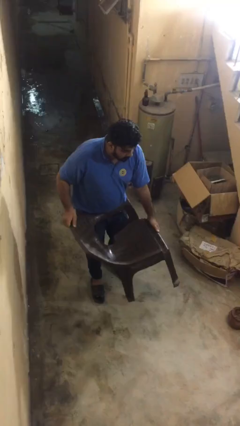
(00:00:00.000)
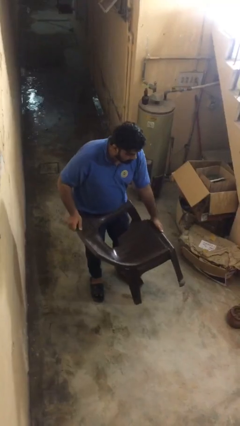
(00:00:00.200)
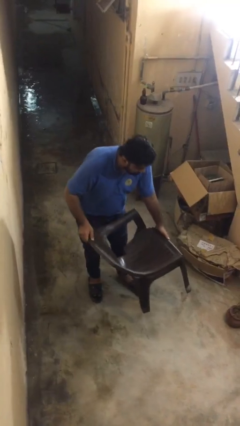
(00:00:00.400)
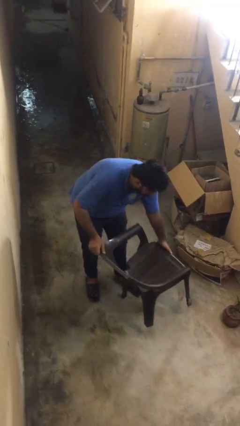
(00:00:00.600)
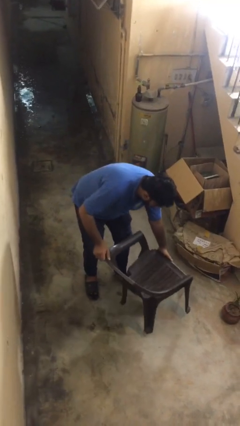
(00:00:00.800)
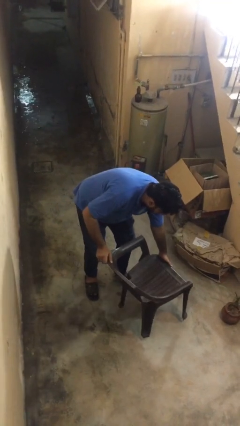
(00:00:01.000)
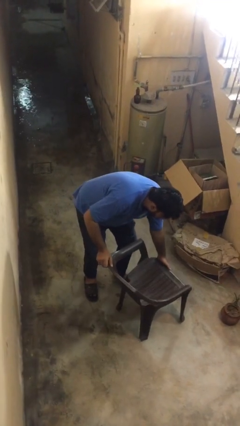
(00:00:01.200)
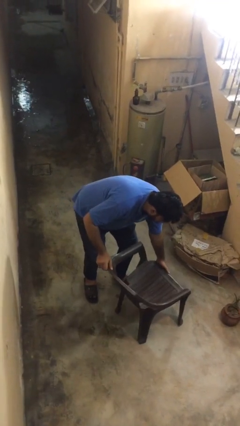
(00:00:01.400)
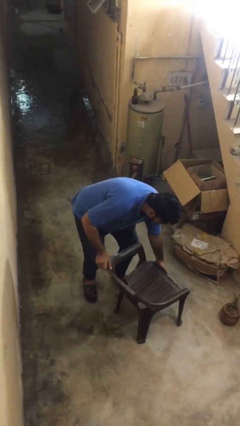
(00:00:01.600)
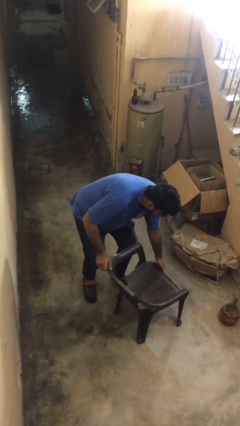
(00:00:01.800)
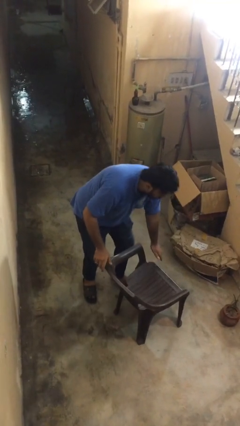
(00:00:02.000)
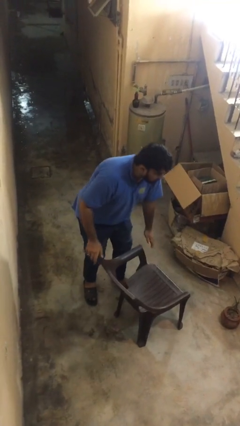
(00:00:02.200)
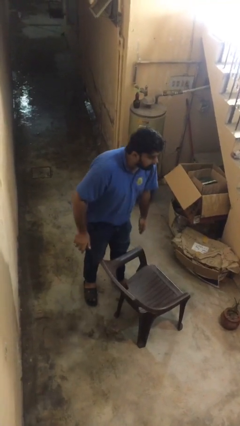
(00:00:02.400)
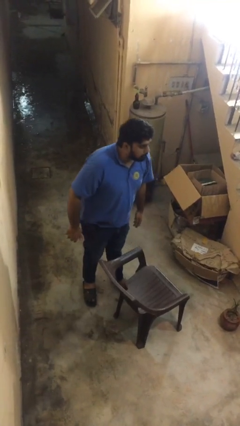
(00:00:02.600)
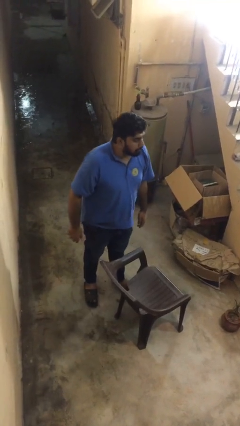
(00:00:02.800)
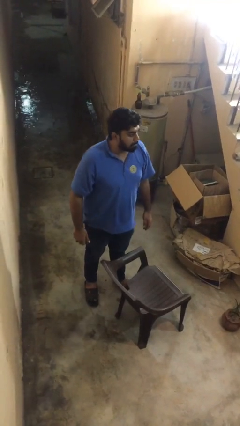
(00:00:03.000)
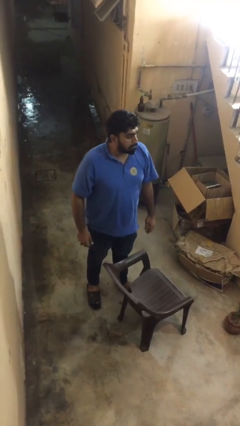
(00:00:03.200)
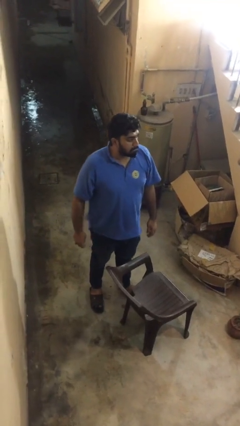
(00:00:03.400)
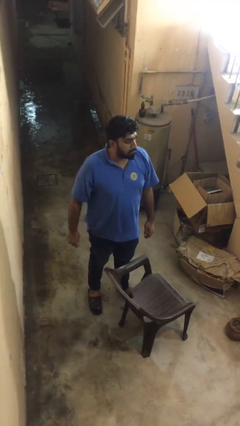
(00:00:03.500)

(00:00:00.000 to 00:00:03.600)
person puts down object on floor

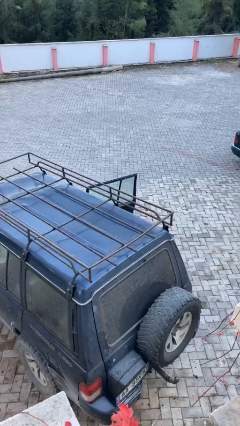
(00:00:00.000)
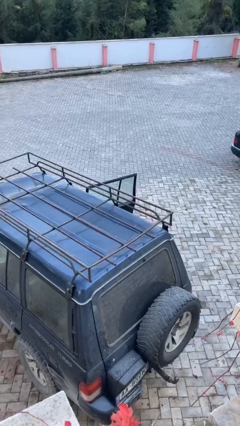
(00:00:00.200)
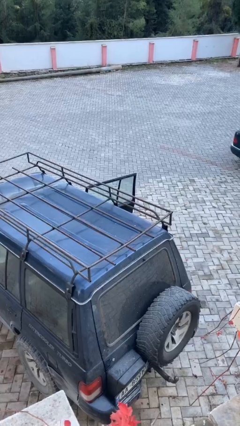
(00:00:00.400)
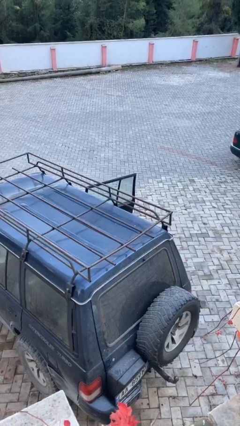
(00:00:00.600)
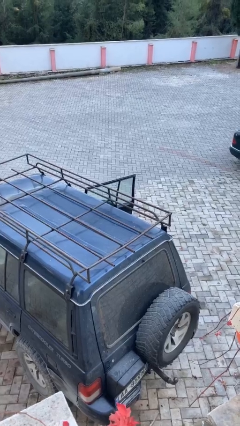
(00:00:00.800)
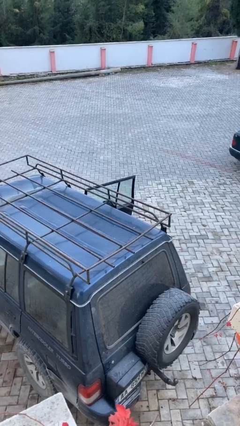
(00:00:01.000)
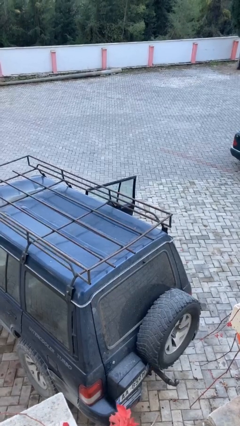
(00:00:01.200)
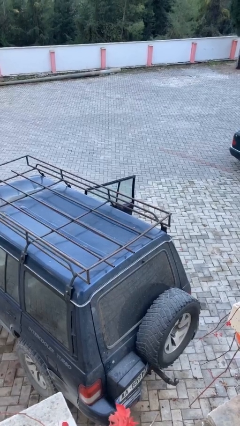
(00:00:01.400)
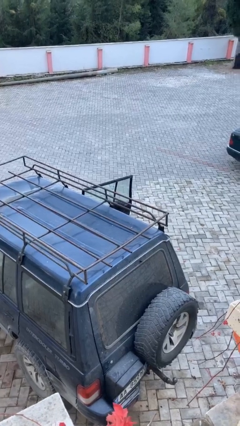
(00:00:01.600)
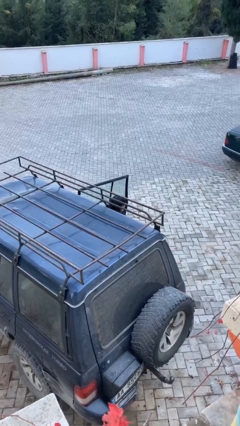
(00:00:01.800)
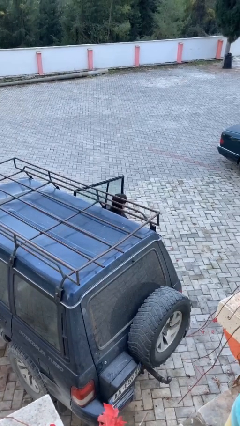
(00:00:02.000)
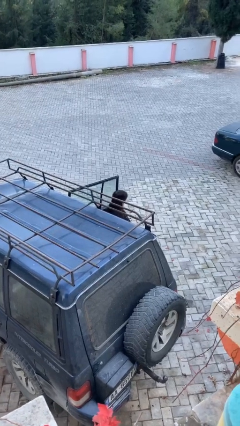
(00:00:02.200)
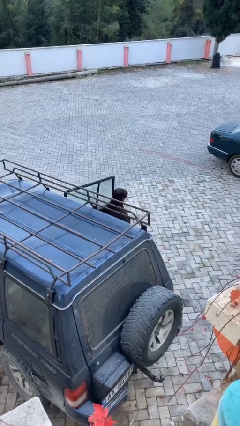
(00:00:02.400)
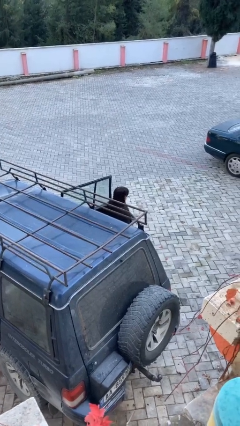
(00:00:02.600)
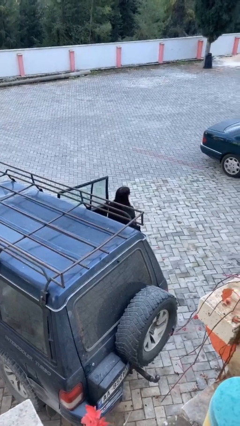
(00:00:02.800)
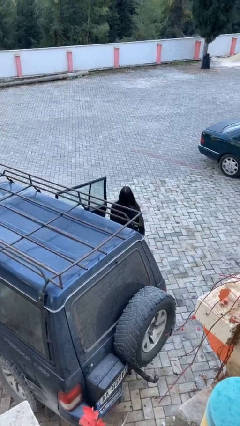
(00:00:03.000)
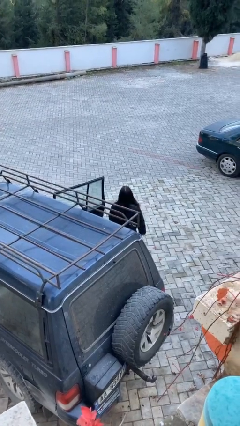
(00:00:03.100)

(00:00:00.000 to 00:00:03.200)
person exits car

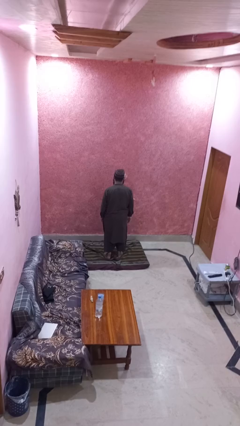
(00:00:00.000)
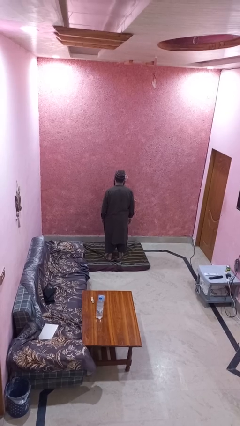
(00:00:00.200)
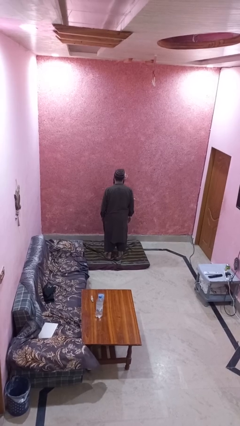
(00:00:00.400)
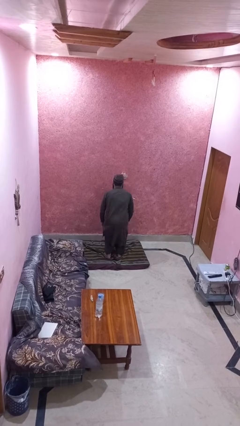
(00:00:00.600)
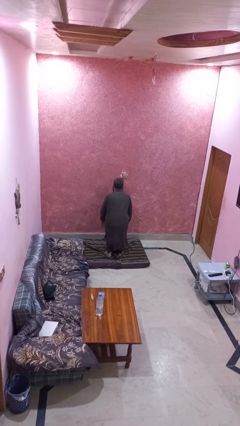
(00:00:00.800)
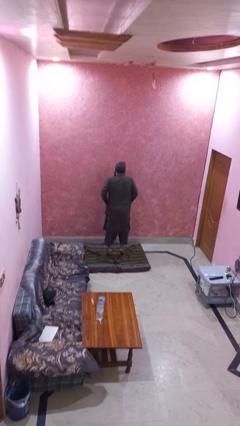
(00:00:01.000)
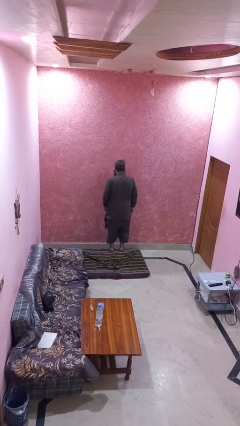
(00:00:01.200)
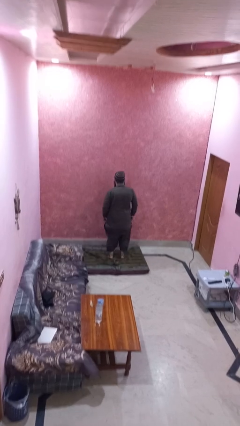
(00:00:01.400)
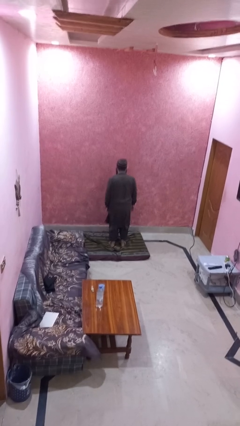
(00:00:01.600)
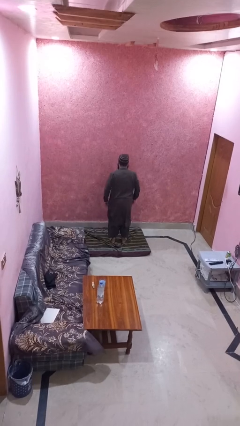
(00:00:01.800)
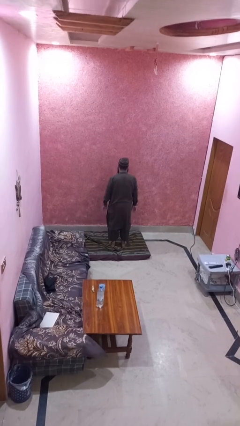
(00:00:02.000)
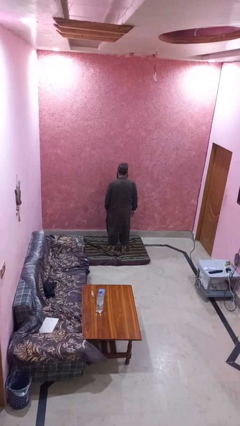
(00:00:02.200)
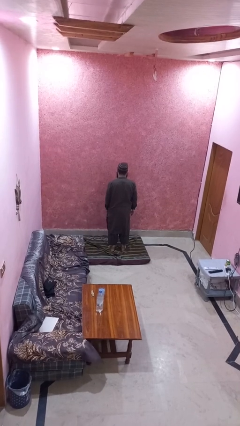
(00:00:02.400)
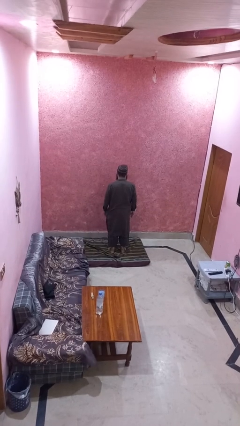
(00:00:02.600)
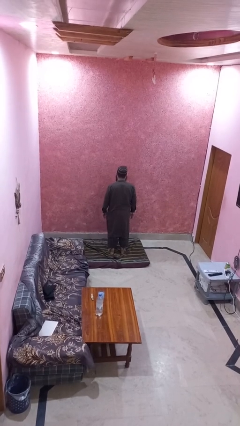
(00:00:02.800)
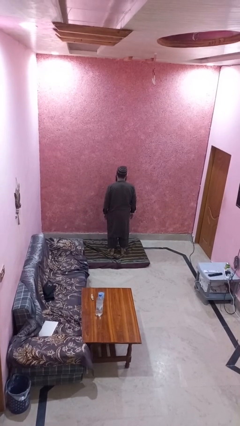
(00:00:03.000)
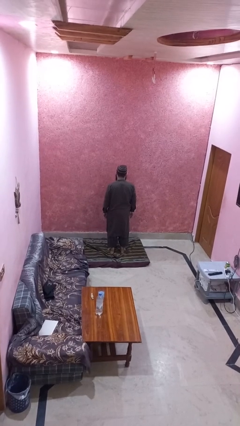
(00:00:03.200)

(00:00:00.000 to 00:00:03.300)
person jumps

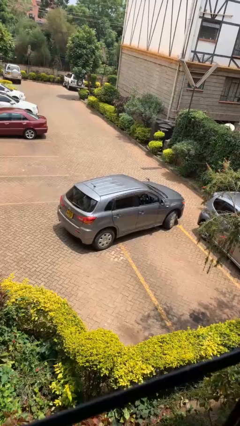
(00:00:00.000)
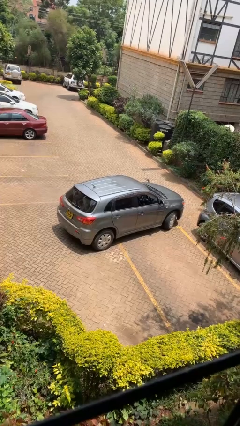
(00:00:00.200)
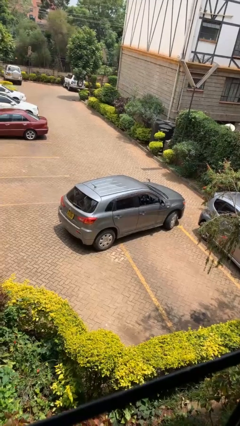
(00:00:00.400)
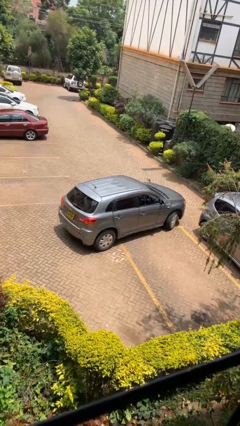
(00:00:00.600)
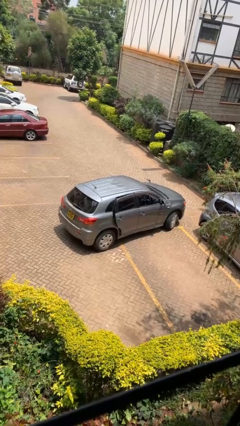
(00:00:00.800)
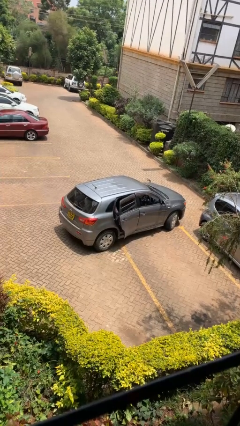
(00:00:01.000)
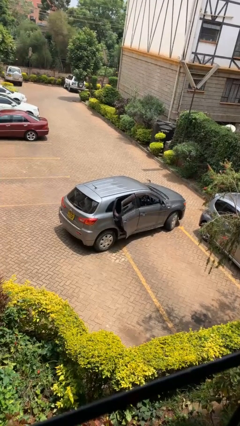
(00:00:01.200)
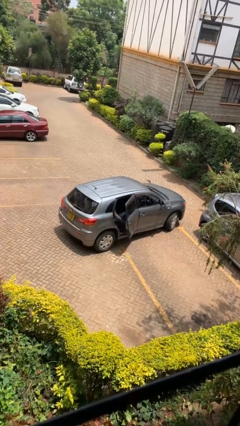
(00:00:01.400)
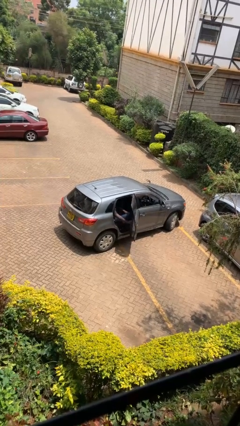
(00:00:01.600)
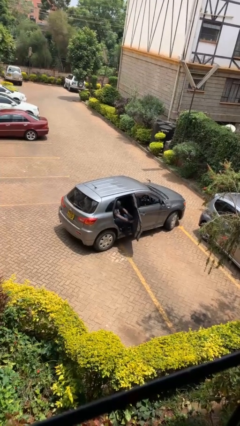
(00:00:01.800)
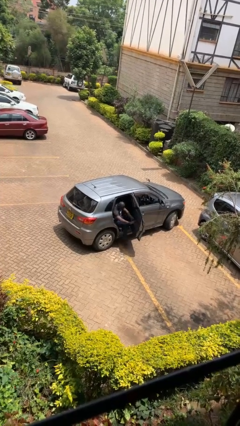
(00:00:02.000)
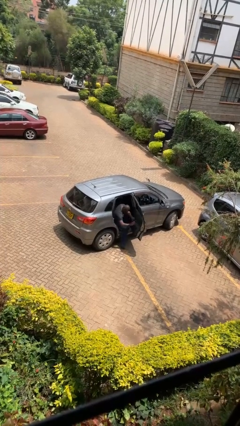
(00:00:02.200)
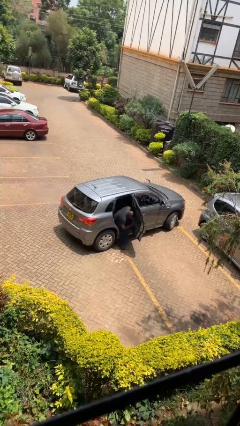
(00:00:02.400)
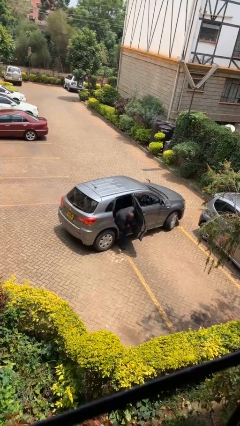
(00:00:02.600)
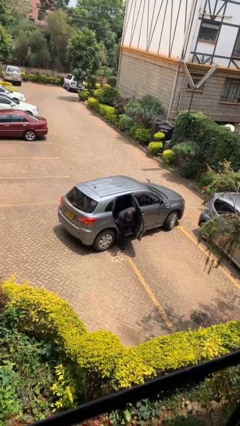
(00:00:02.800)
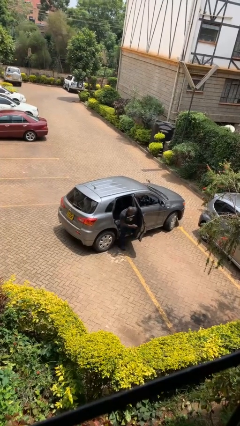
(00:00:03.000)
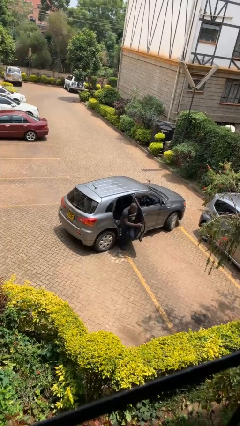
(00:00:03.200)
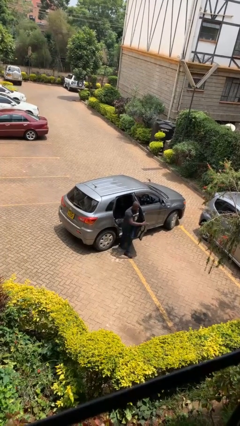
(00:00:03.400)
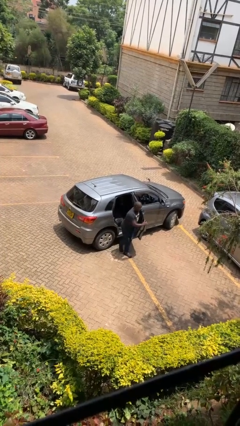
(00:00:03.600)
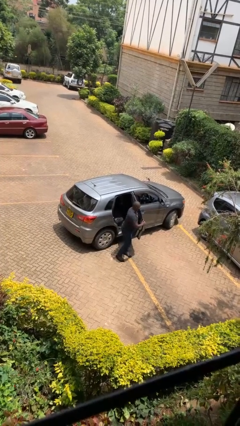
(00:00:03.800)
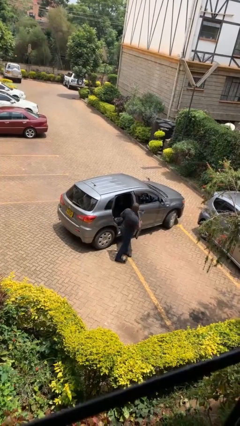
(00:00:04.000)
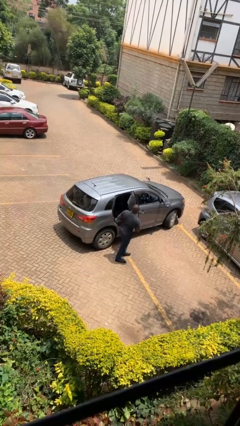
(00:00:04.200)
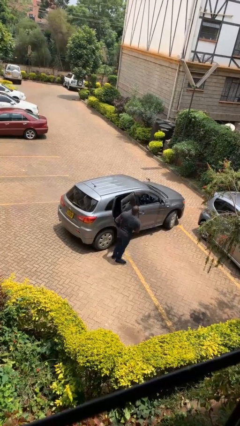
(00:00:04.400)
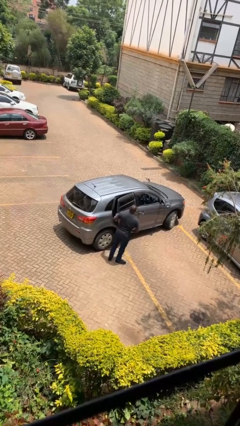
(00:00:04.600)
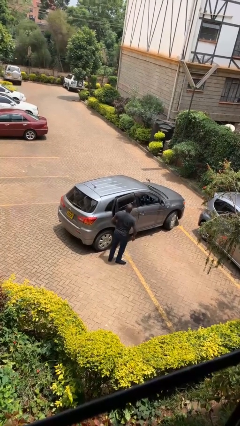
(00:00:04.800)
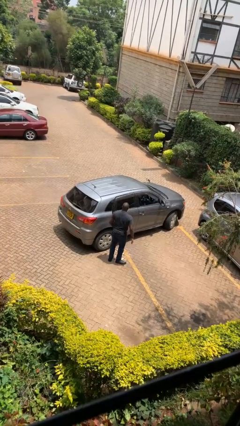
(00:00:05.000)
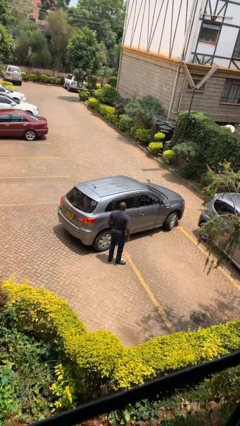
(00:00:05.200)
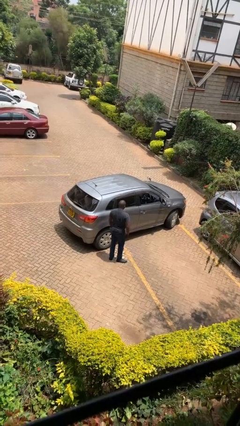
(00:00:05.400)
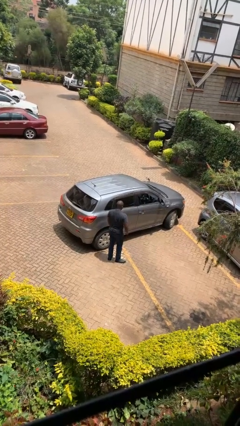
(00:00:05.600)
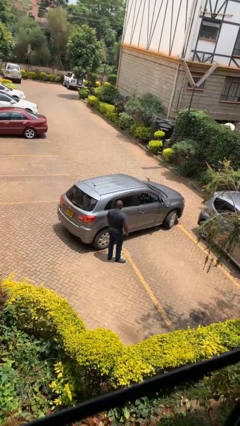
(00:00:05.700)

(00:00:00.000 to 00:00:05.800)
car drops off person

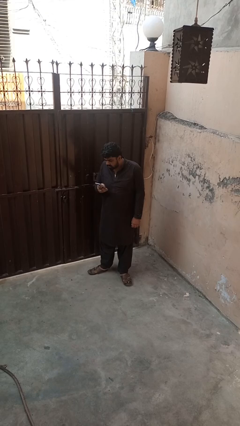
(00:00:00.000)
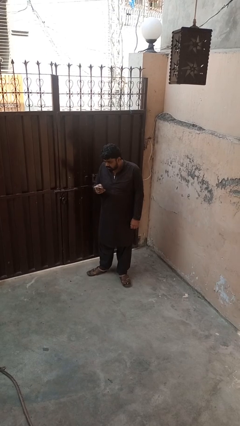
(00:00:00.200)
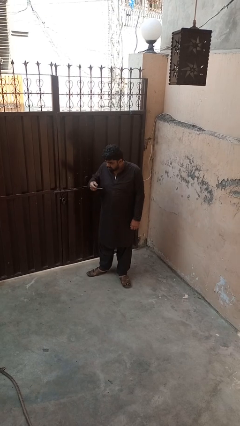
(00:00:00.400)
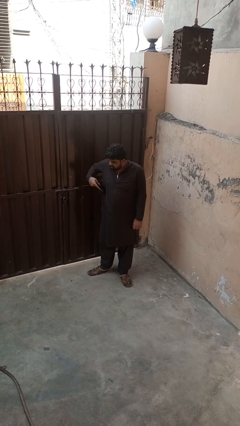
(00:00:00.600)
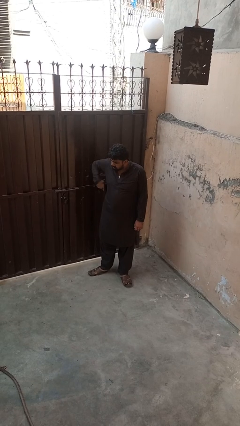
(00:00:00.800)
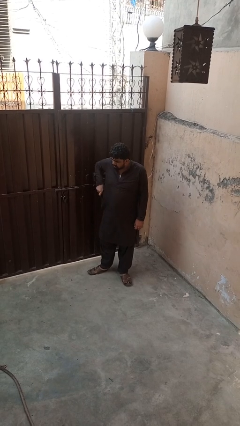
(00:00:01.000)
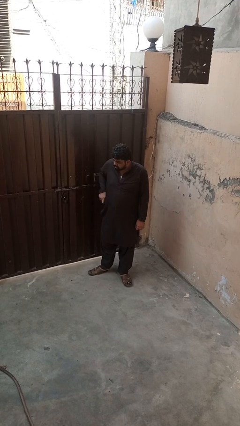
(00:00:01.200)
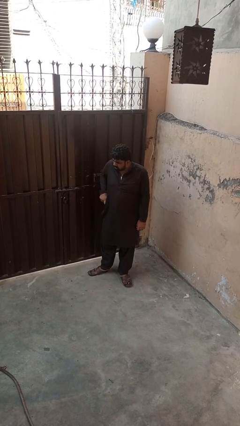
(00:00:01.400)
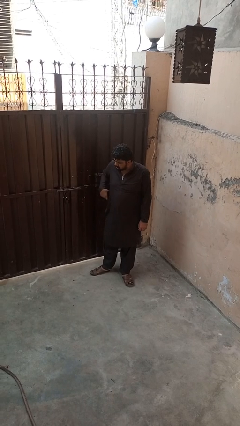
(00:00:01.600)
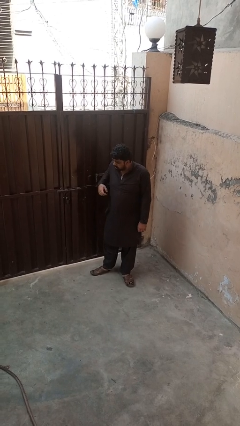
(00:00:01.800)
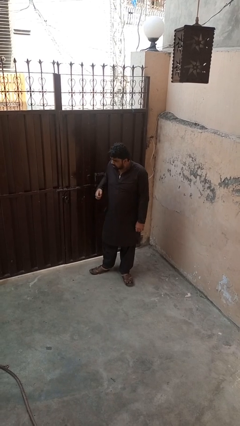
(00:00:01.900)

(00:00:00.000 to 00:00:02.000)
person puts phone into pocket
